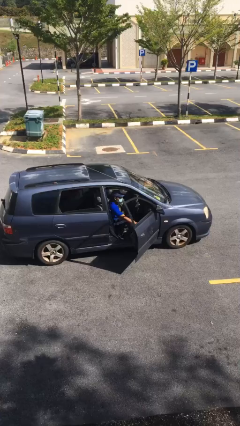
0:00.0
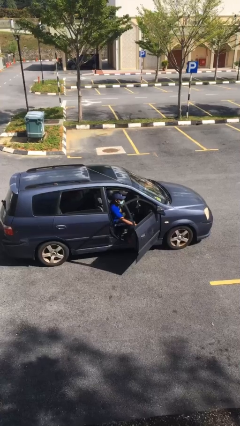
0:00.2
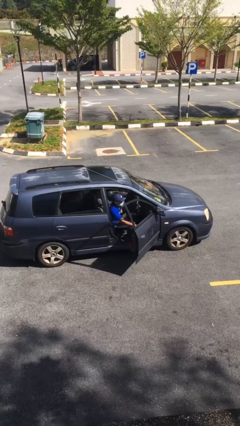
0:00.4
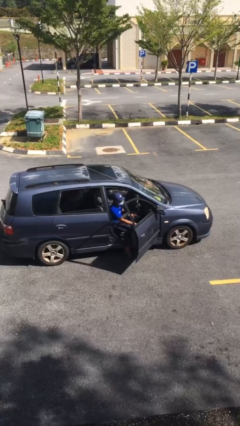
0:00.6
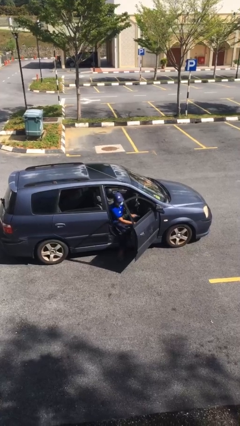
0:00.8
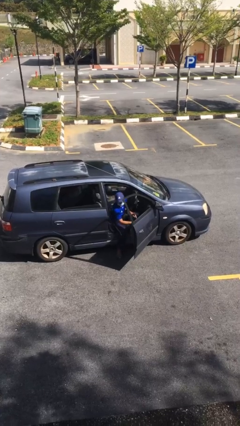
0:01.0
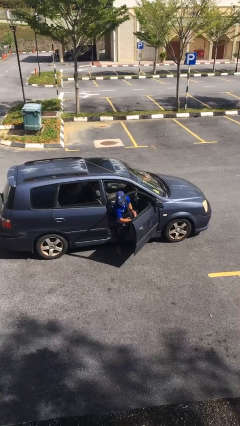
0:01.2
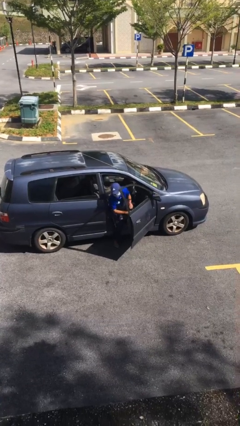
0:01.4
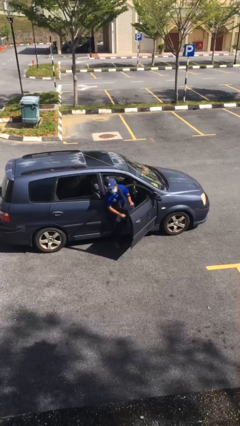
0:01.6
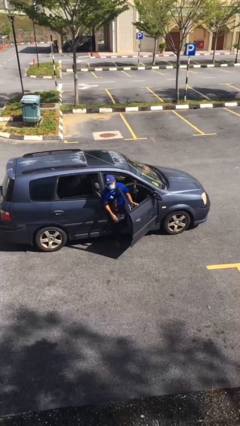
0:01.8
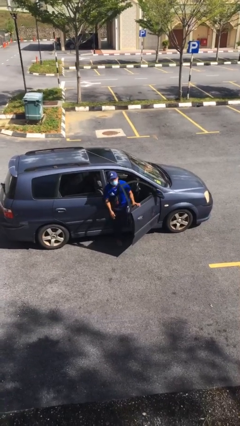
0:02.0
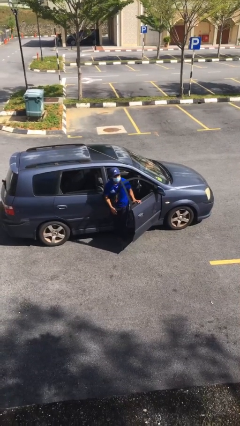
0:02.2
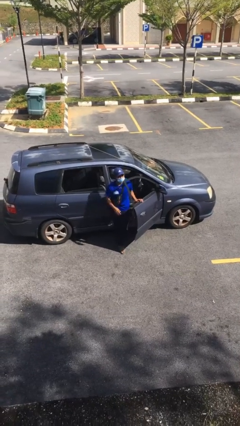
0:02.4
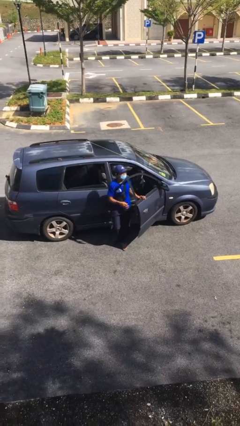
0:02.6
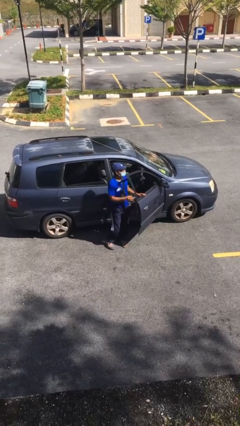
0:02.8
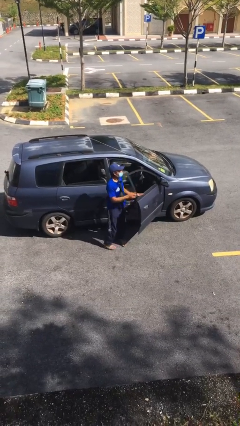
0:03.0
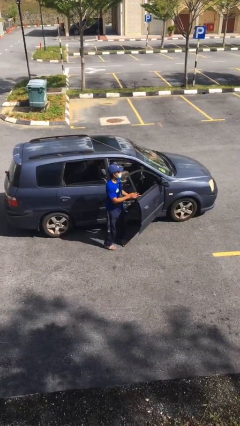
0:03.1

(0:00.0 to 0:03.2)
person exits car

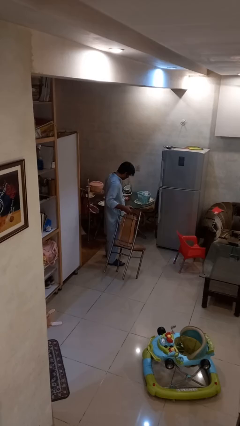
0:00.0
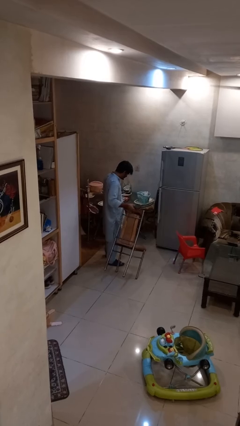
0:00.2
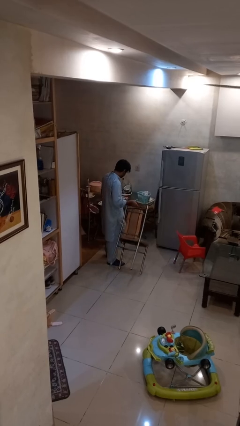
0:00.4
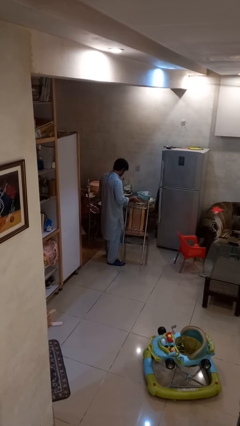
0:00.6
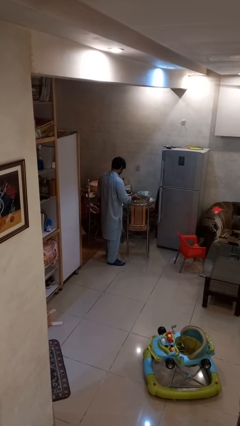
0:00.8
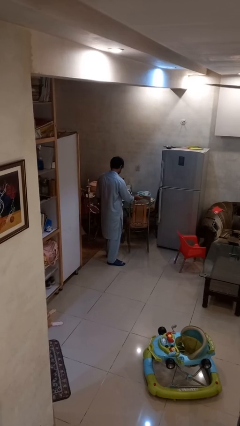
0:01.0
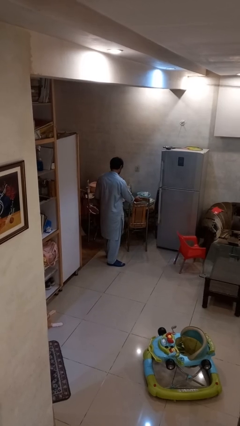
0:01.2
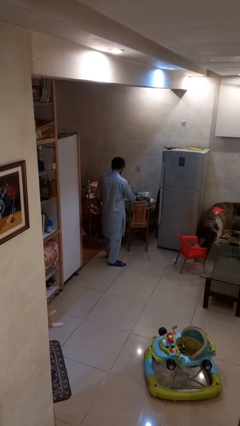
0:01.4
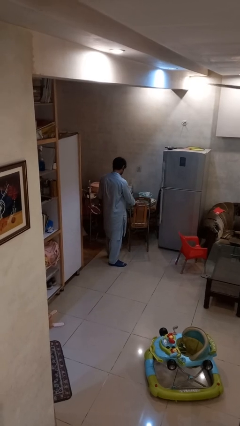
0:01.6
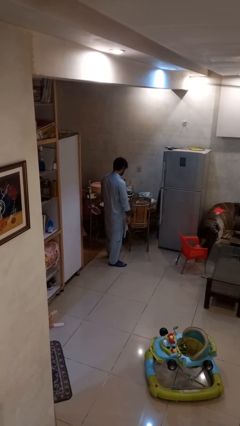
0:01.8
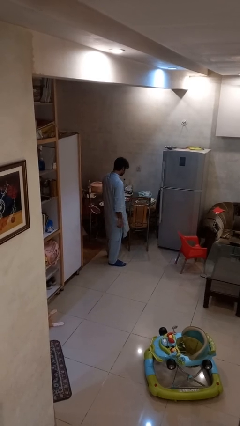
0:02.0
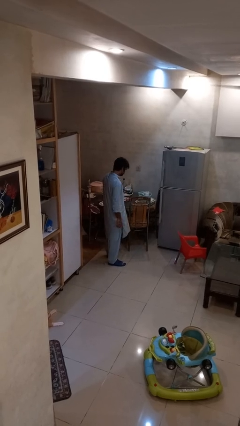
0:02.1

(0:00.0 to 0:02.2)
person pushes in chair

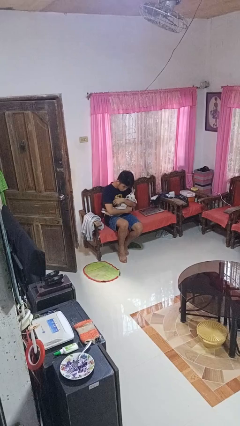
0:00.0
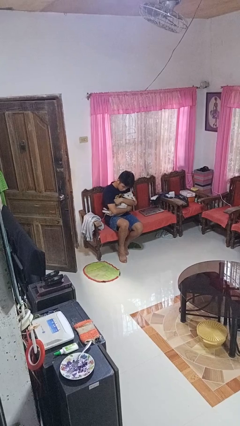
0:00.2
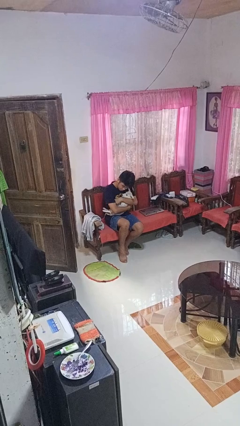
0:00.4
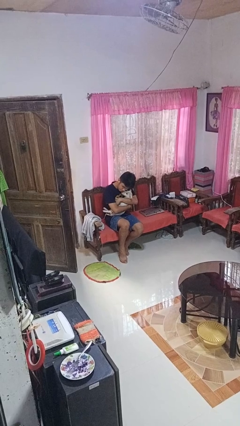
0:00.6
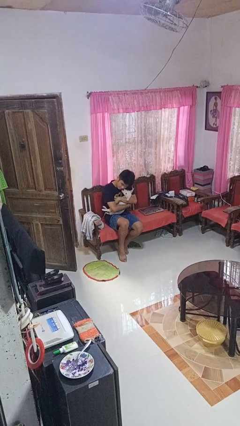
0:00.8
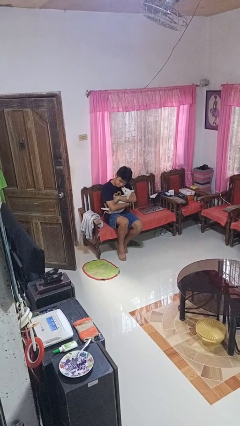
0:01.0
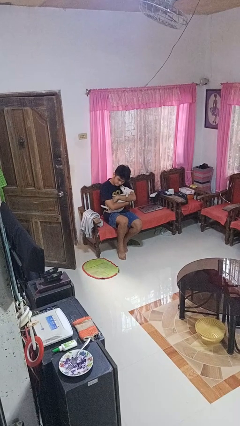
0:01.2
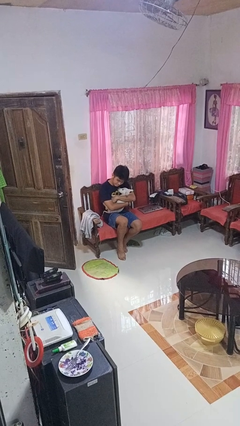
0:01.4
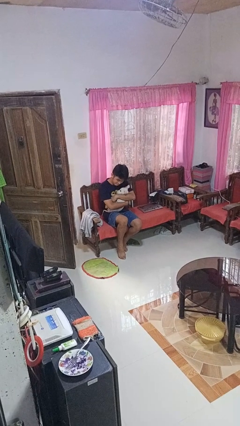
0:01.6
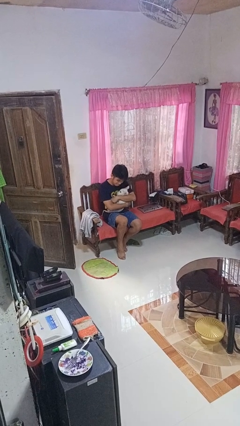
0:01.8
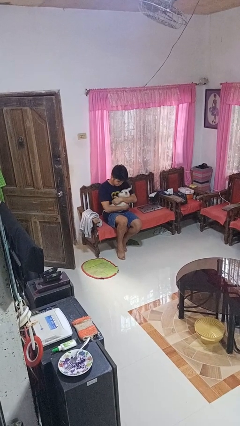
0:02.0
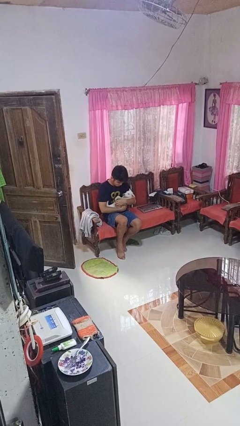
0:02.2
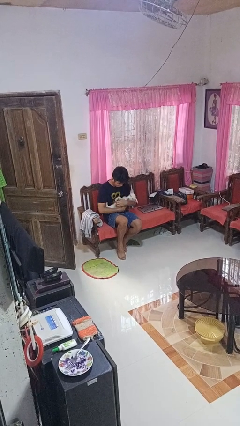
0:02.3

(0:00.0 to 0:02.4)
person hugs dog

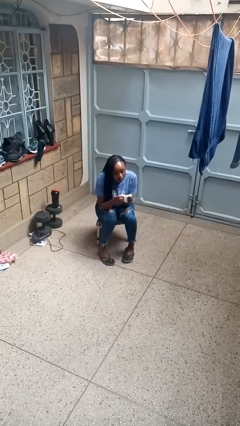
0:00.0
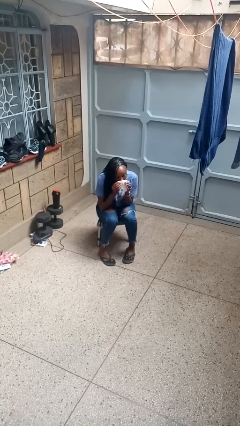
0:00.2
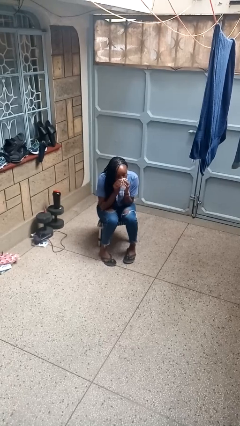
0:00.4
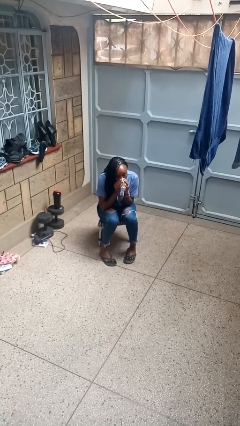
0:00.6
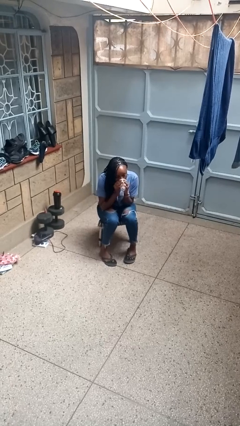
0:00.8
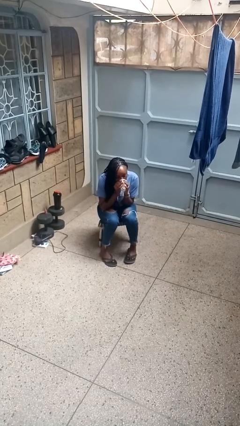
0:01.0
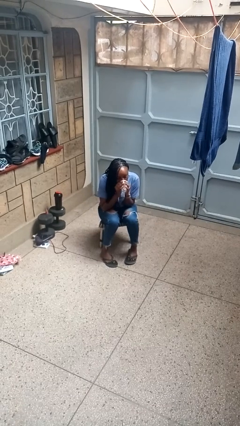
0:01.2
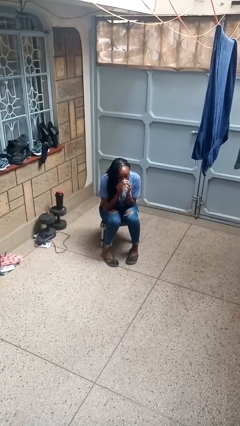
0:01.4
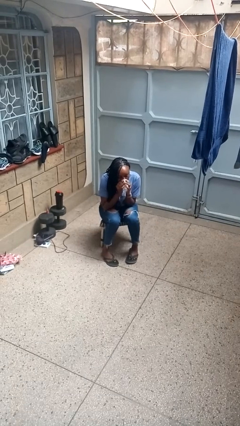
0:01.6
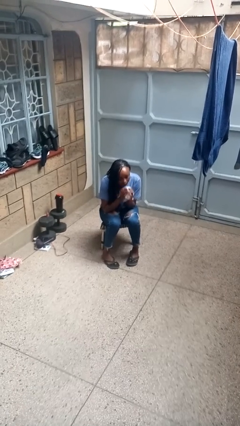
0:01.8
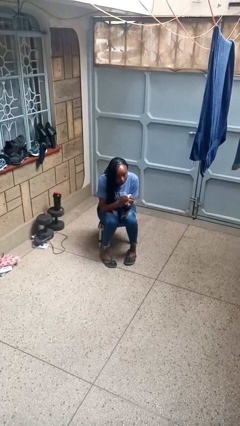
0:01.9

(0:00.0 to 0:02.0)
person blows nose

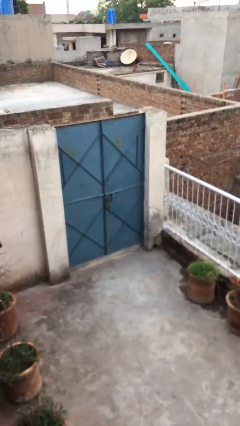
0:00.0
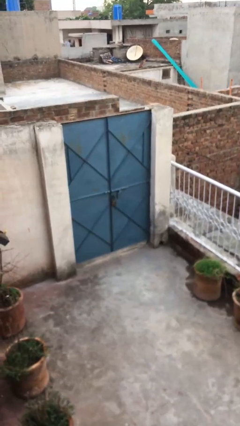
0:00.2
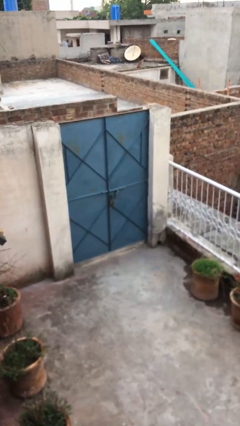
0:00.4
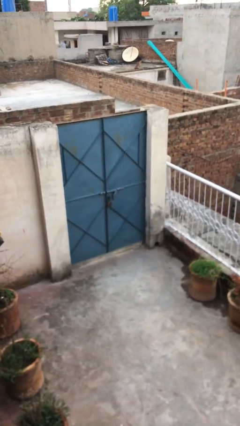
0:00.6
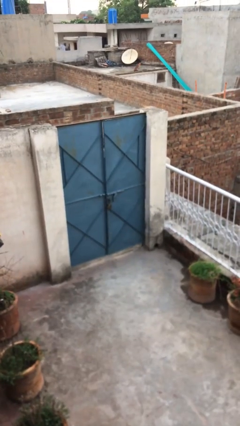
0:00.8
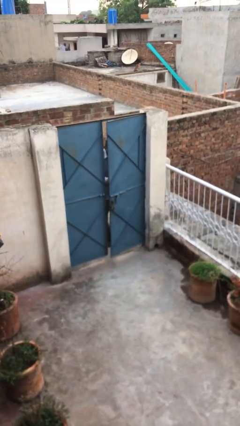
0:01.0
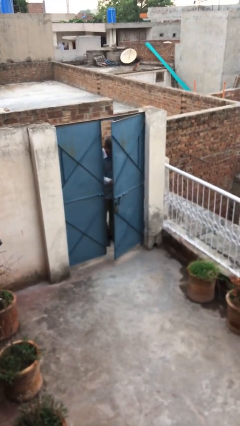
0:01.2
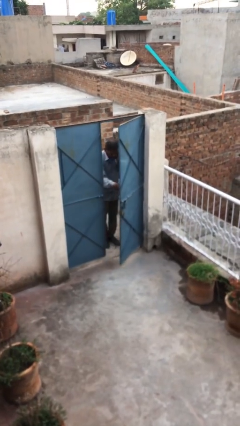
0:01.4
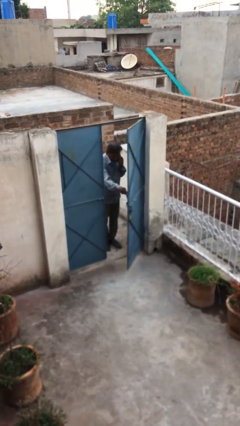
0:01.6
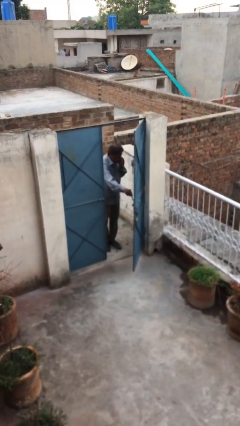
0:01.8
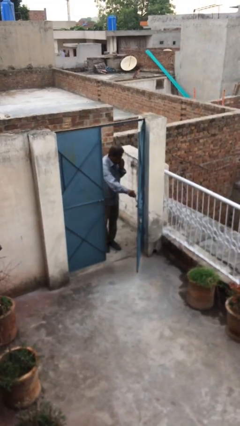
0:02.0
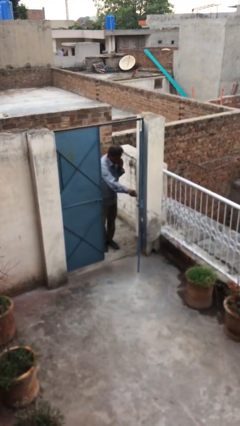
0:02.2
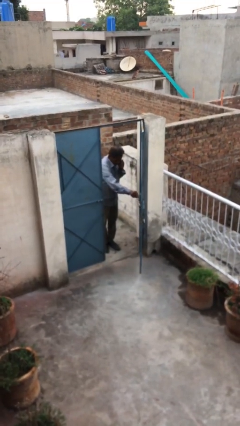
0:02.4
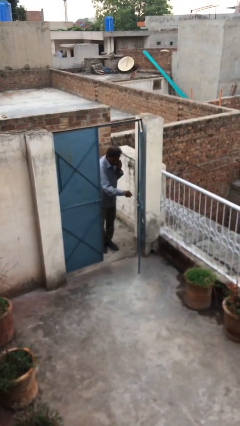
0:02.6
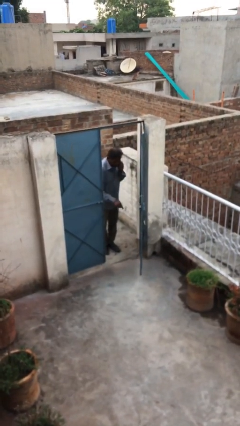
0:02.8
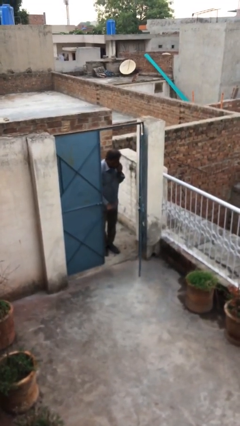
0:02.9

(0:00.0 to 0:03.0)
person opens facility door

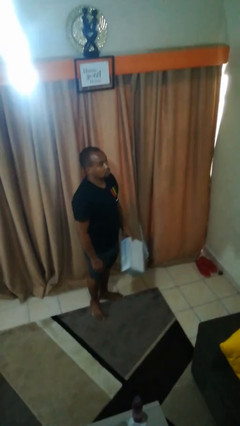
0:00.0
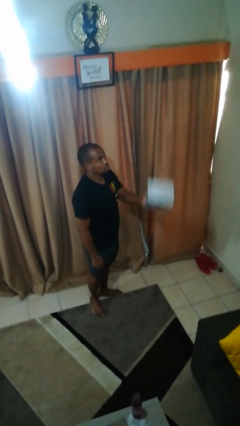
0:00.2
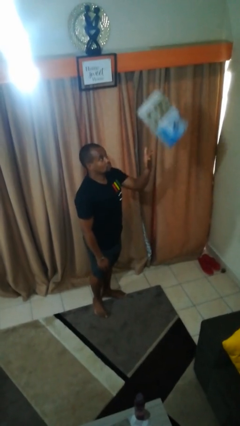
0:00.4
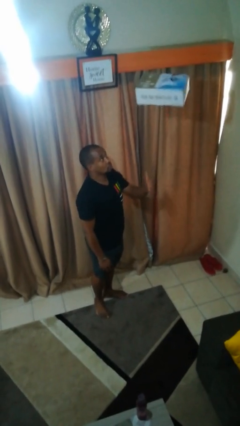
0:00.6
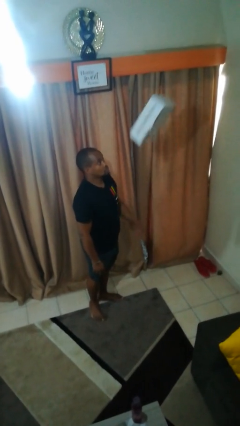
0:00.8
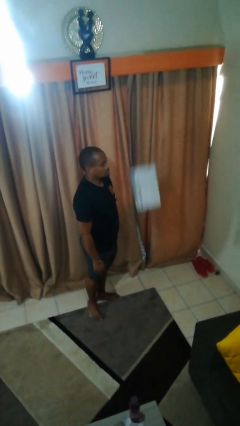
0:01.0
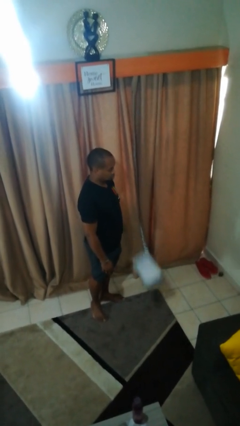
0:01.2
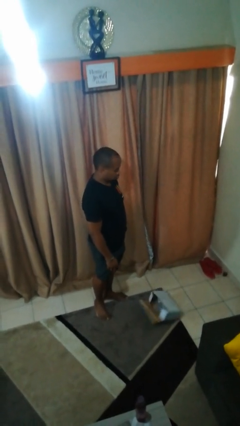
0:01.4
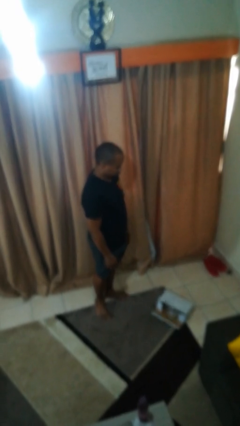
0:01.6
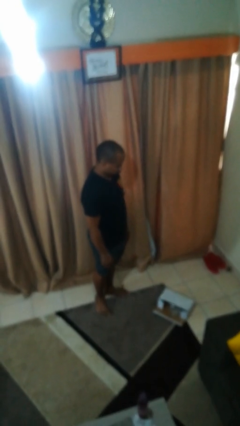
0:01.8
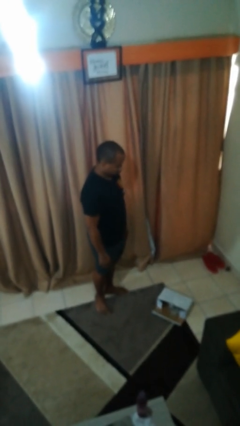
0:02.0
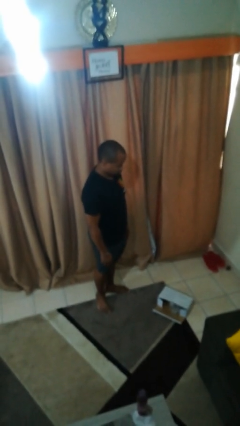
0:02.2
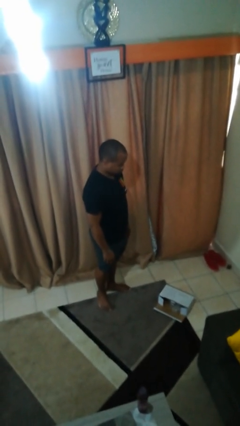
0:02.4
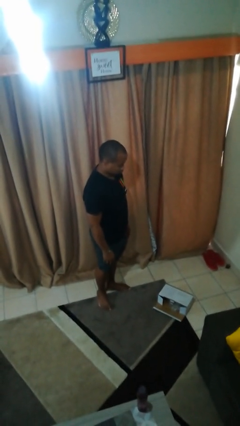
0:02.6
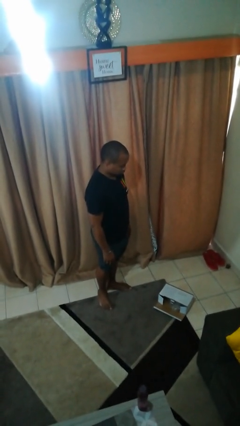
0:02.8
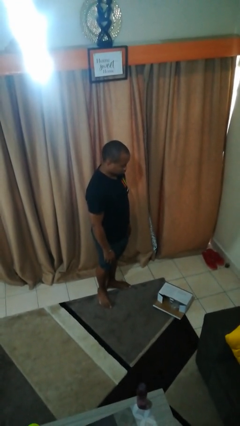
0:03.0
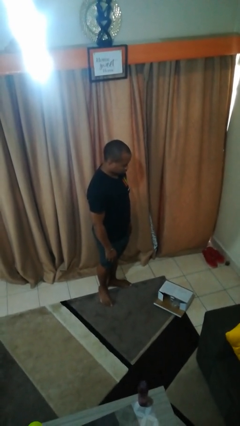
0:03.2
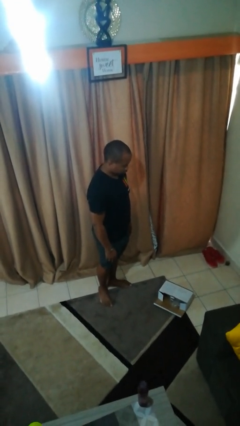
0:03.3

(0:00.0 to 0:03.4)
person throws object into air

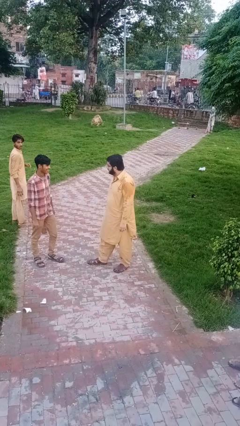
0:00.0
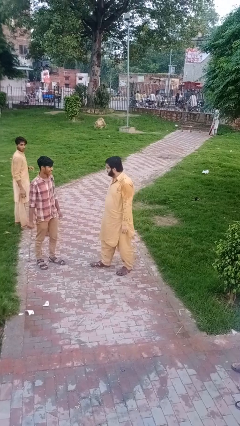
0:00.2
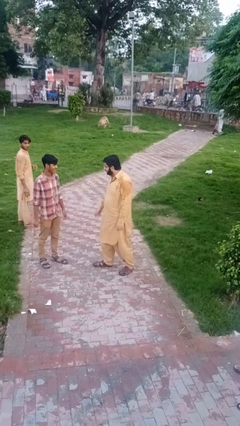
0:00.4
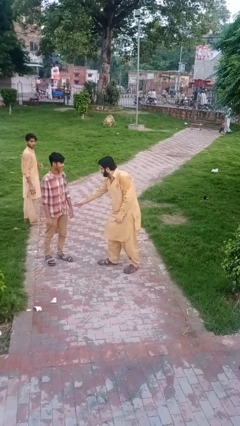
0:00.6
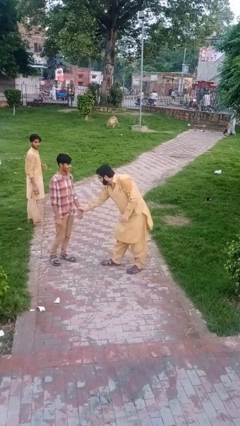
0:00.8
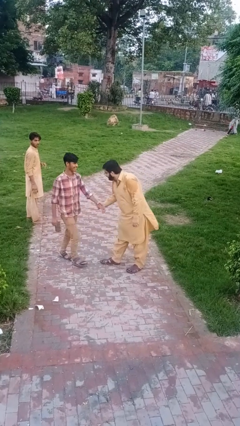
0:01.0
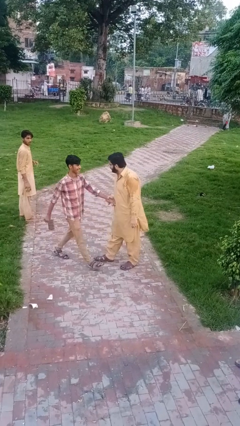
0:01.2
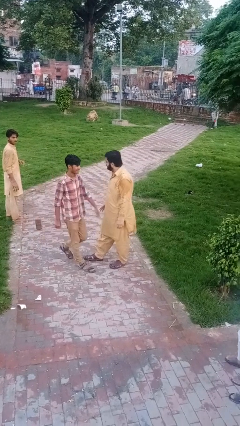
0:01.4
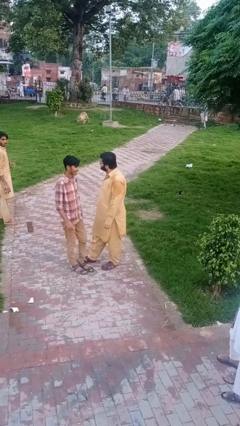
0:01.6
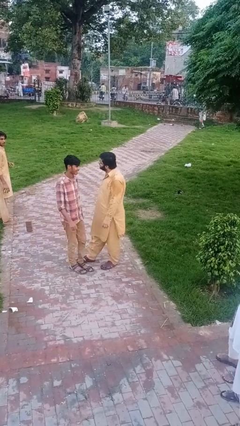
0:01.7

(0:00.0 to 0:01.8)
person grabs person by forearm
